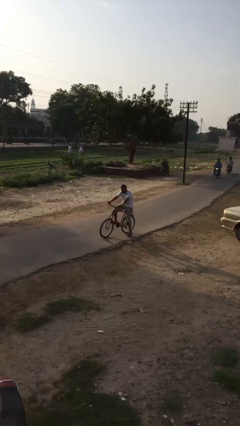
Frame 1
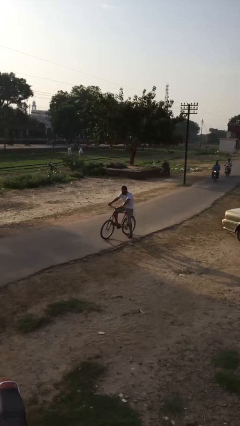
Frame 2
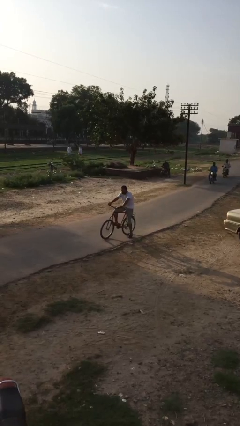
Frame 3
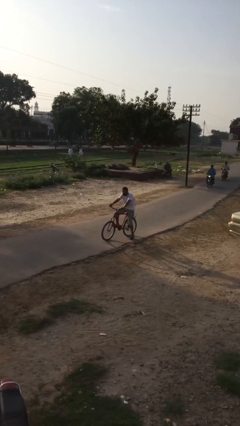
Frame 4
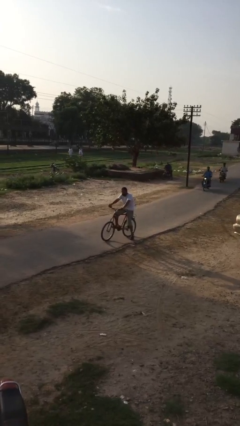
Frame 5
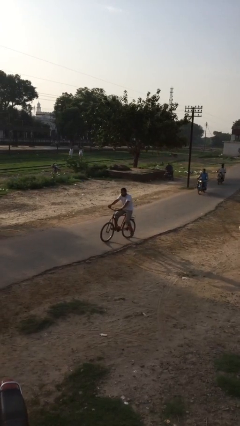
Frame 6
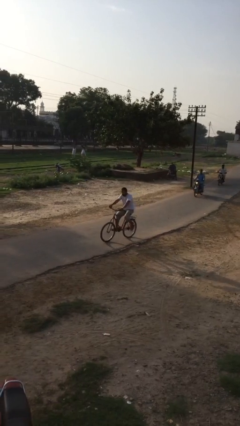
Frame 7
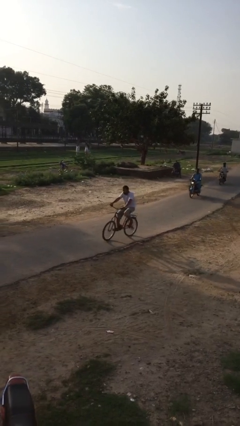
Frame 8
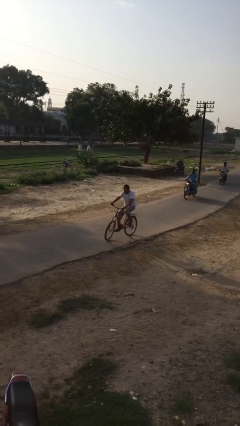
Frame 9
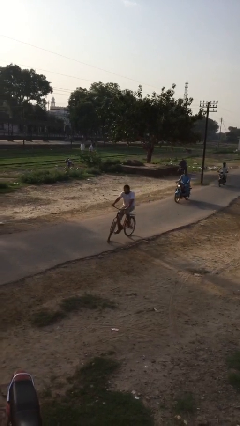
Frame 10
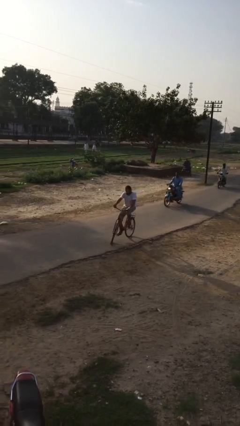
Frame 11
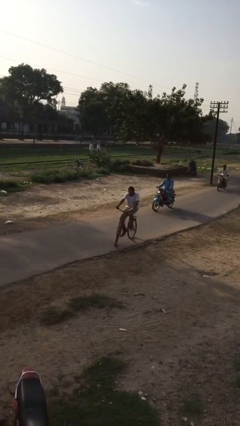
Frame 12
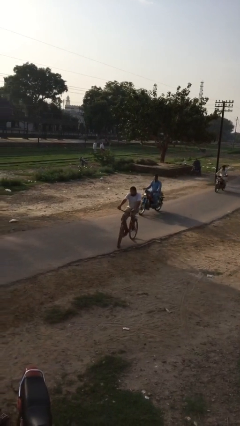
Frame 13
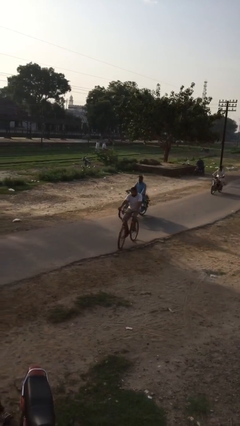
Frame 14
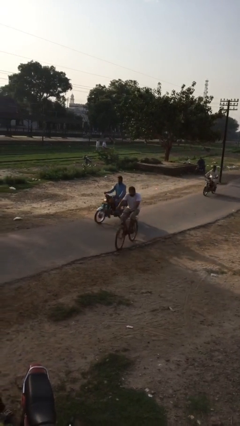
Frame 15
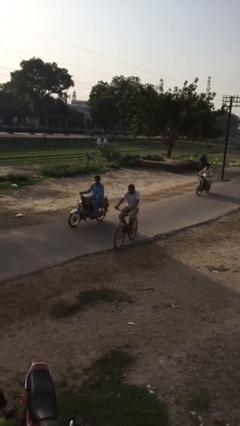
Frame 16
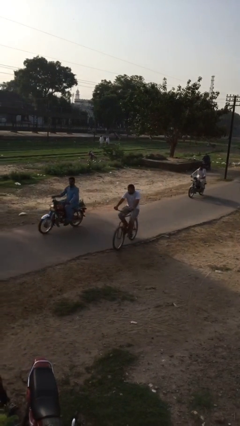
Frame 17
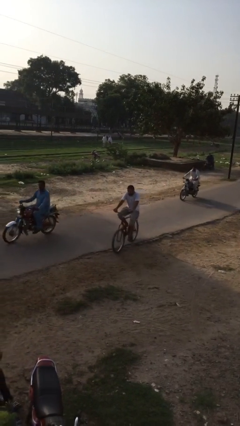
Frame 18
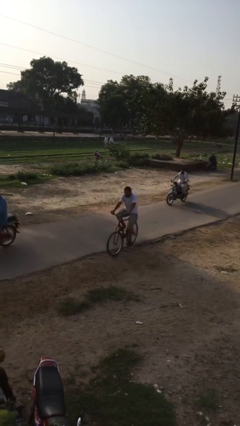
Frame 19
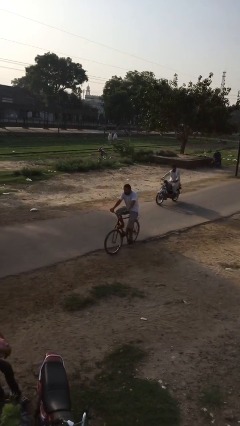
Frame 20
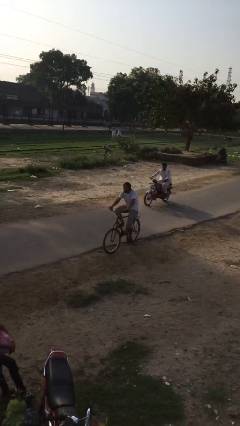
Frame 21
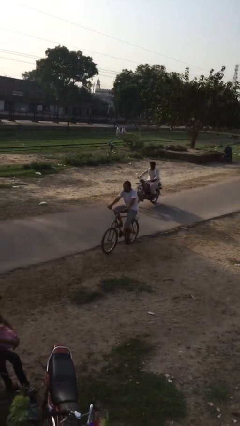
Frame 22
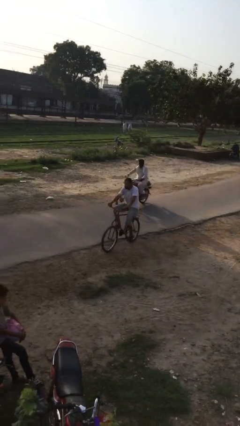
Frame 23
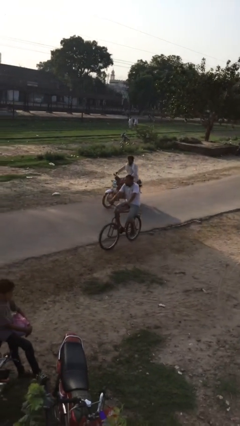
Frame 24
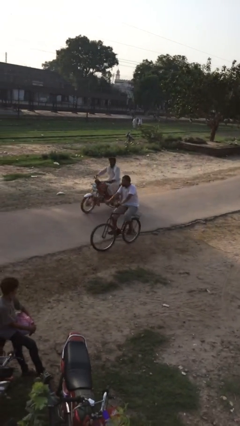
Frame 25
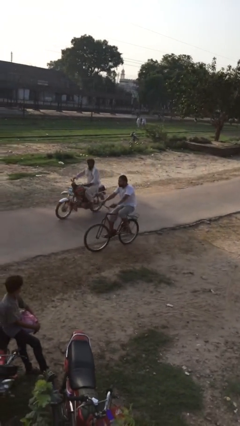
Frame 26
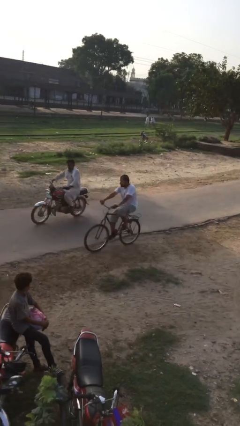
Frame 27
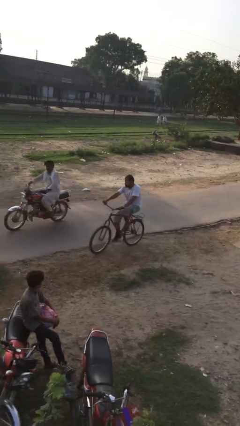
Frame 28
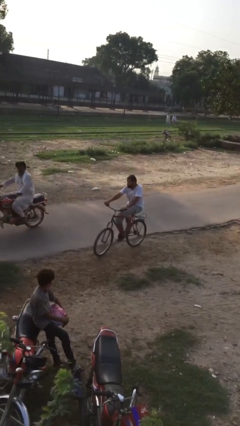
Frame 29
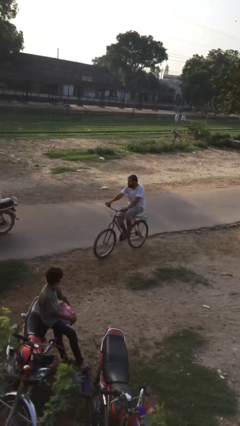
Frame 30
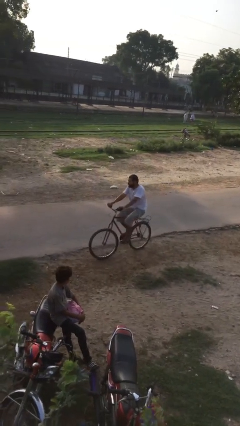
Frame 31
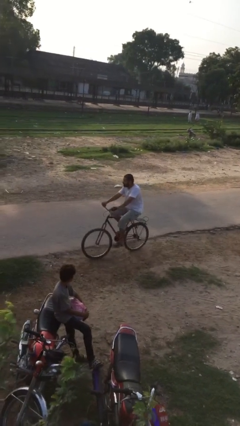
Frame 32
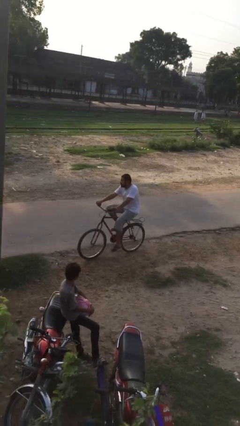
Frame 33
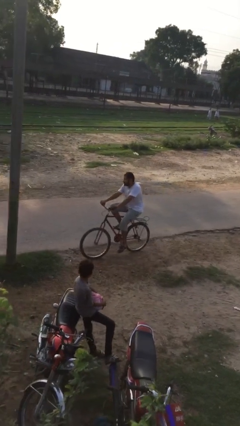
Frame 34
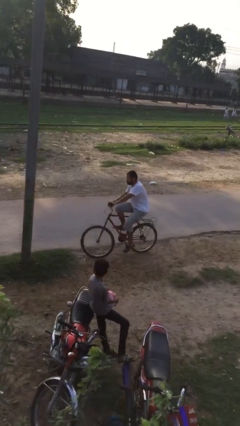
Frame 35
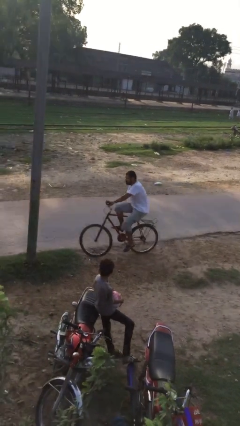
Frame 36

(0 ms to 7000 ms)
person rides bicycle

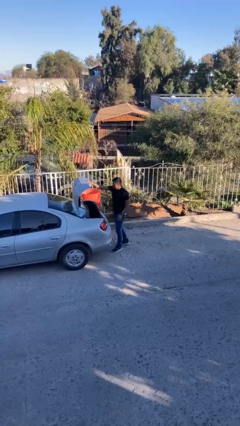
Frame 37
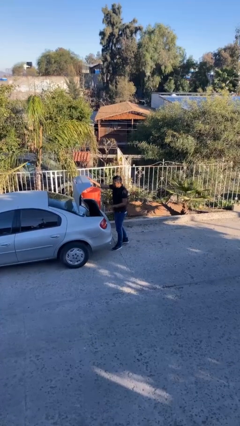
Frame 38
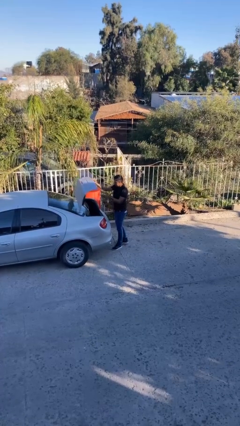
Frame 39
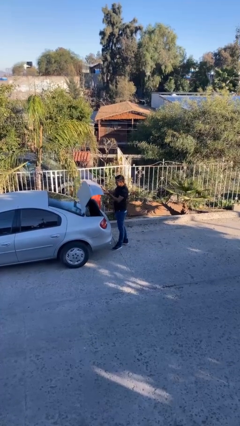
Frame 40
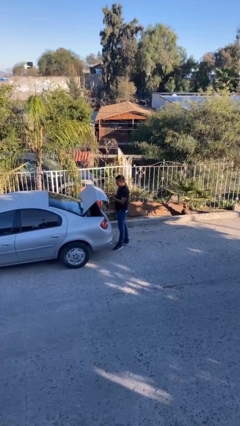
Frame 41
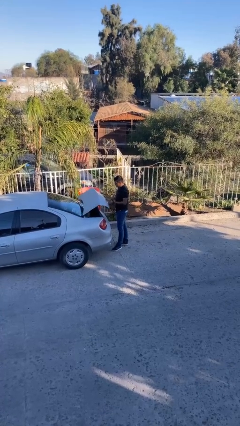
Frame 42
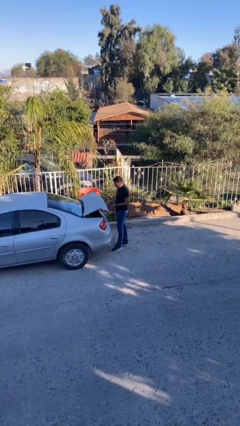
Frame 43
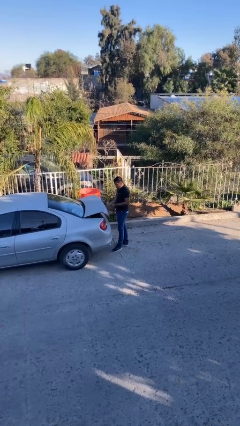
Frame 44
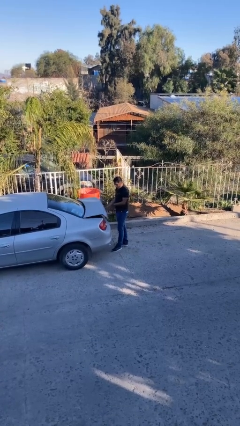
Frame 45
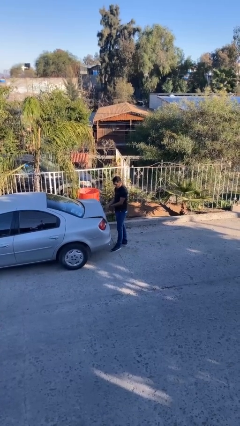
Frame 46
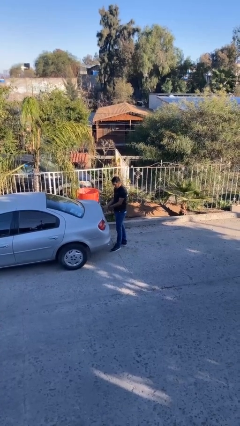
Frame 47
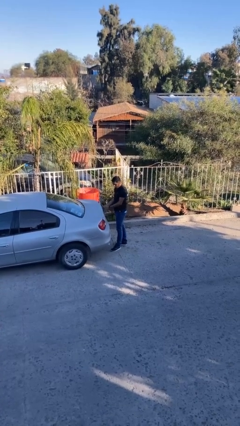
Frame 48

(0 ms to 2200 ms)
person closes car trunk

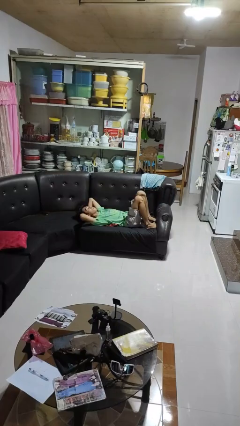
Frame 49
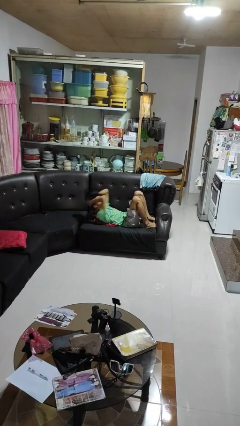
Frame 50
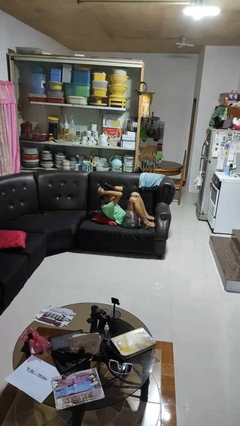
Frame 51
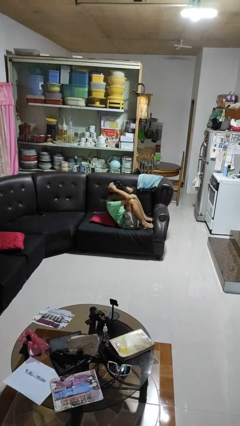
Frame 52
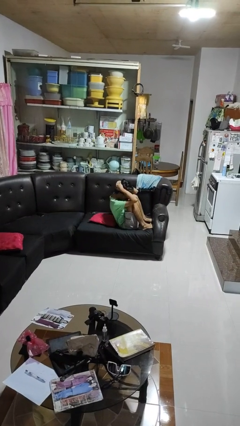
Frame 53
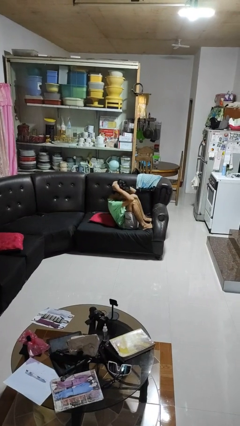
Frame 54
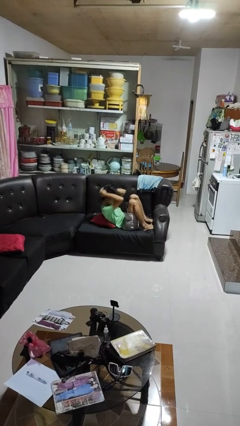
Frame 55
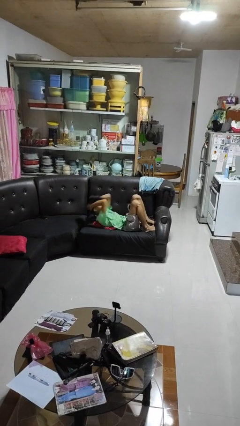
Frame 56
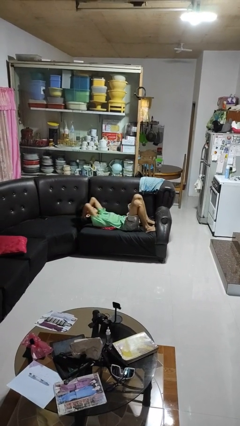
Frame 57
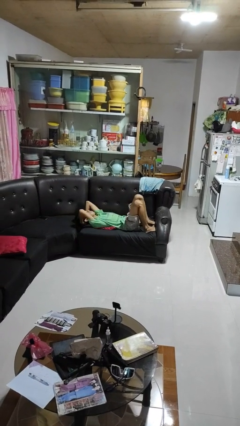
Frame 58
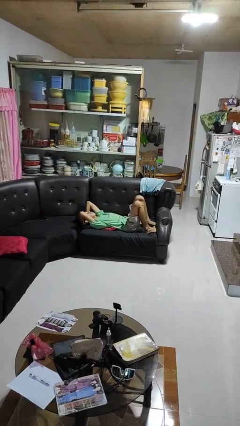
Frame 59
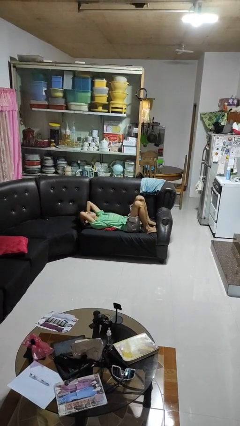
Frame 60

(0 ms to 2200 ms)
person exercises with situp

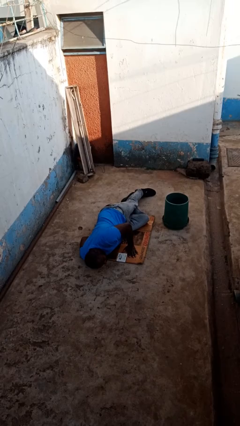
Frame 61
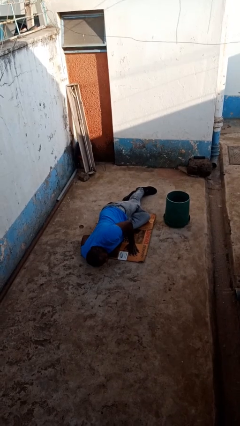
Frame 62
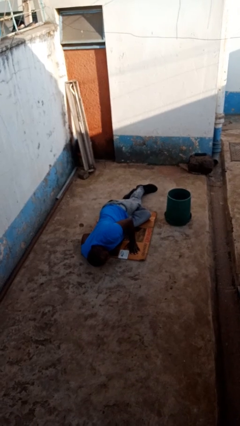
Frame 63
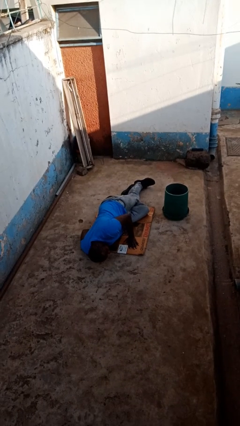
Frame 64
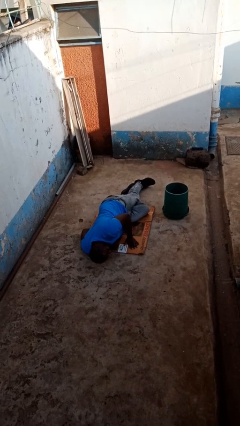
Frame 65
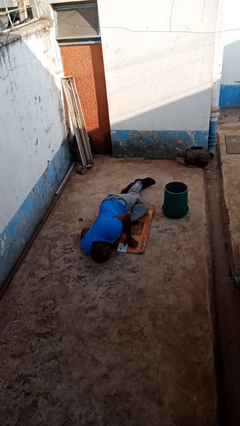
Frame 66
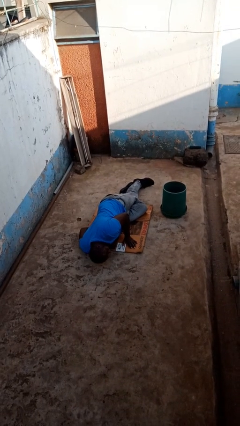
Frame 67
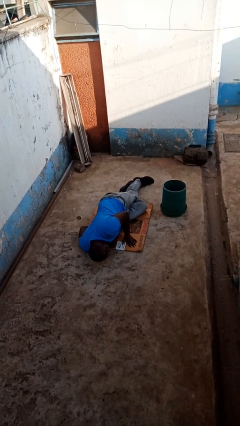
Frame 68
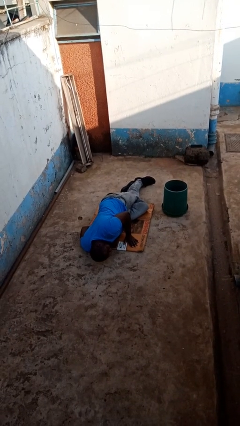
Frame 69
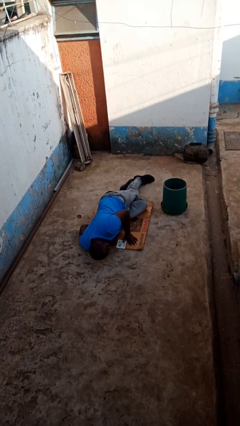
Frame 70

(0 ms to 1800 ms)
person lies down on floor

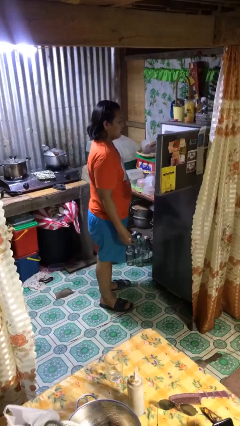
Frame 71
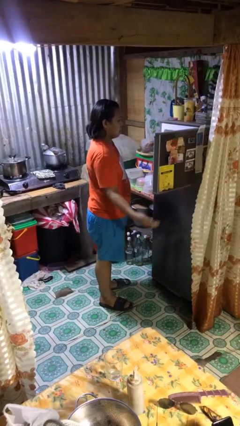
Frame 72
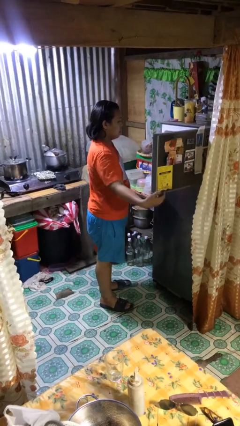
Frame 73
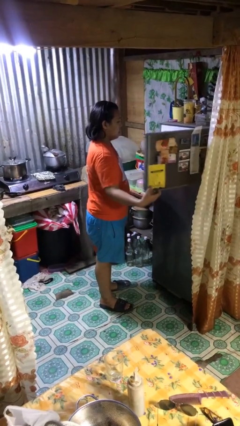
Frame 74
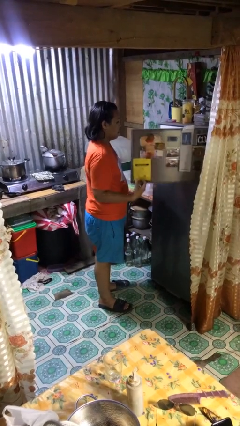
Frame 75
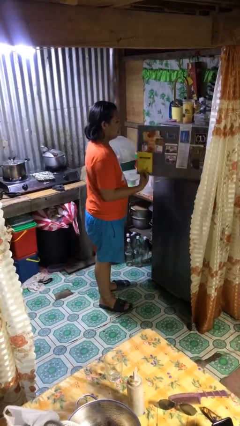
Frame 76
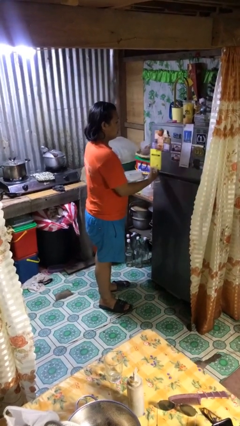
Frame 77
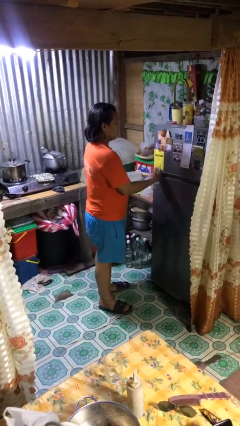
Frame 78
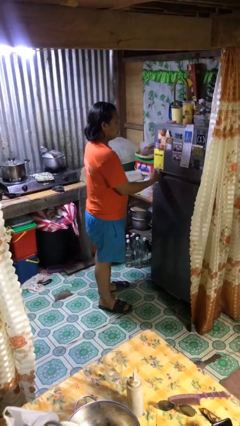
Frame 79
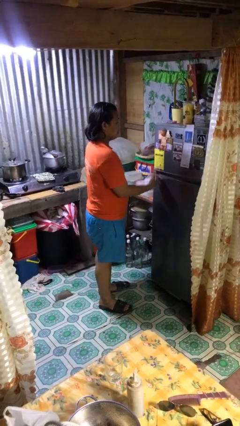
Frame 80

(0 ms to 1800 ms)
person closes refrigerator

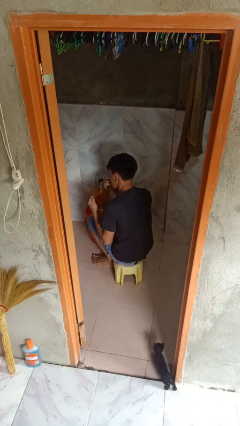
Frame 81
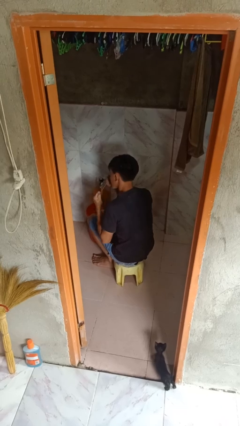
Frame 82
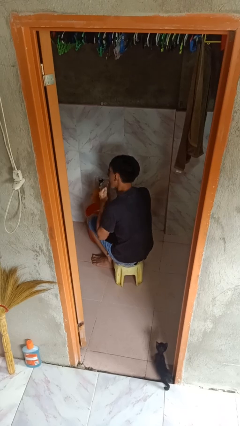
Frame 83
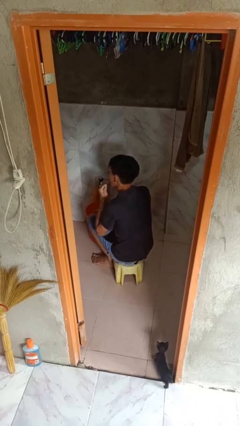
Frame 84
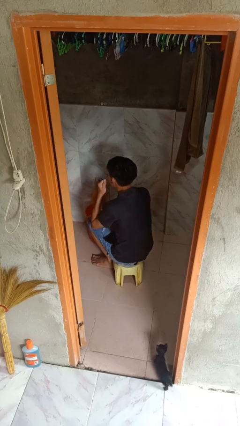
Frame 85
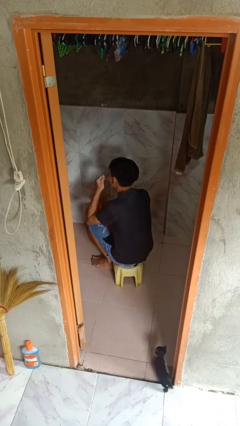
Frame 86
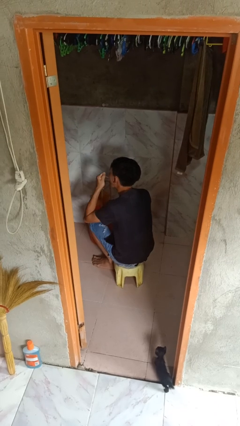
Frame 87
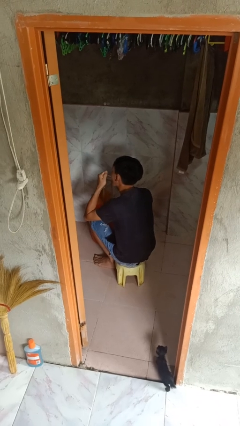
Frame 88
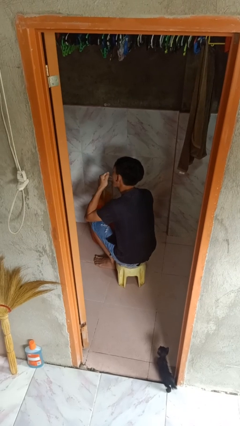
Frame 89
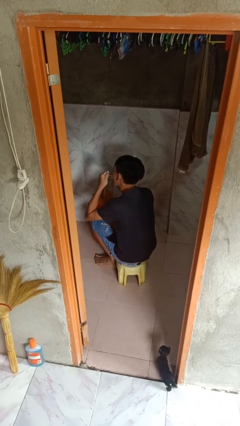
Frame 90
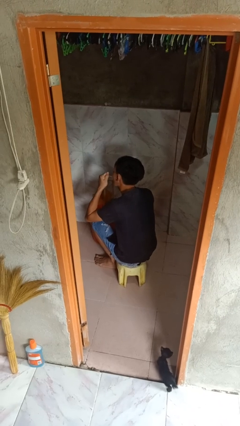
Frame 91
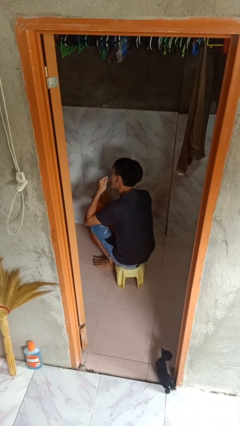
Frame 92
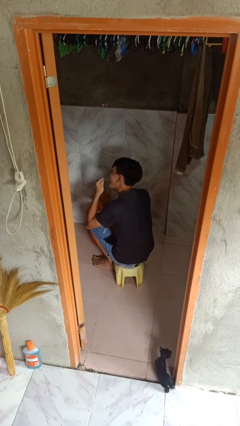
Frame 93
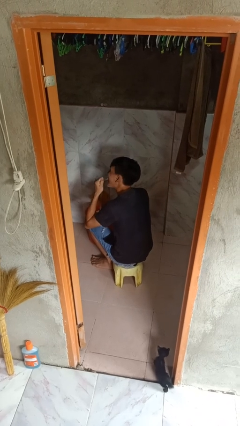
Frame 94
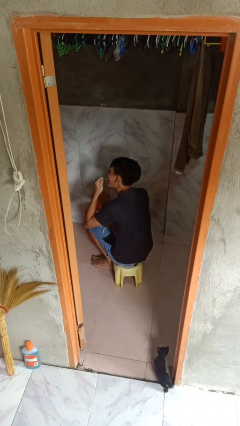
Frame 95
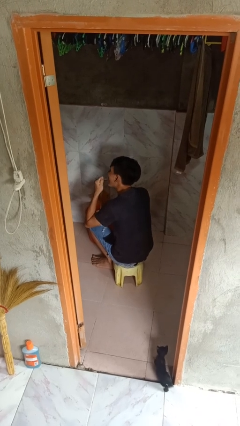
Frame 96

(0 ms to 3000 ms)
person flosses
